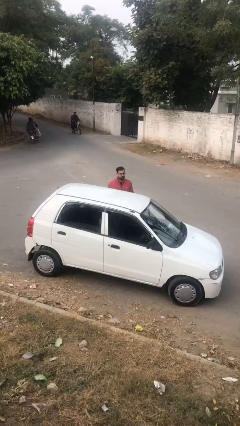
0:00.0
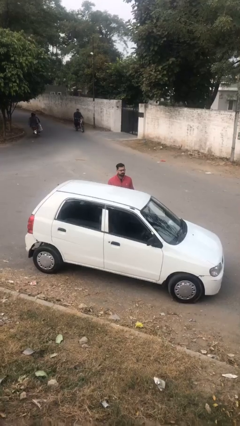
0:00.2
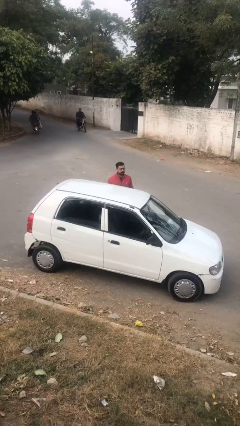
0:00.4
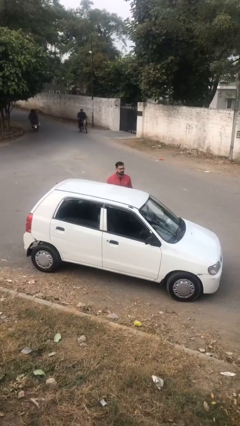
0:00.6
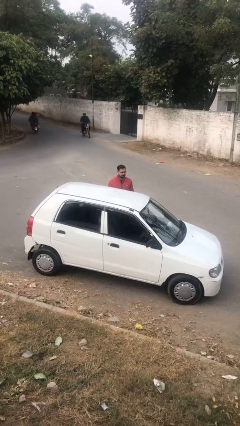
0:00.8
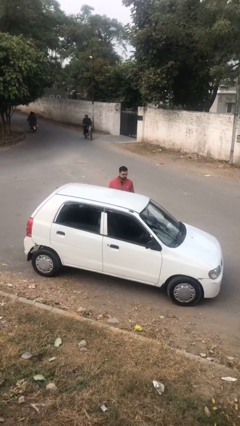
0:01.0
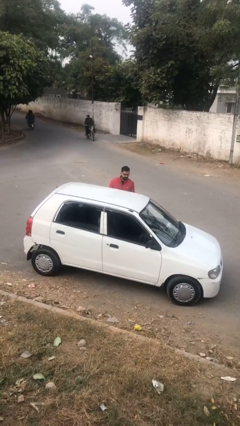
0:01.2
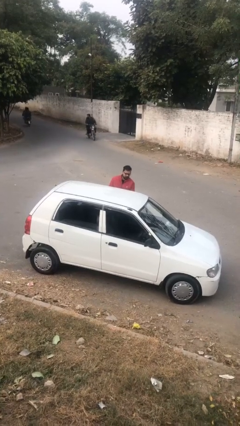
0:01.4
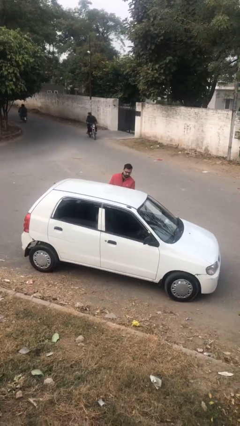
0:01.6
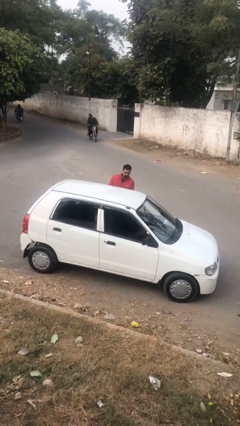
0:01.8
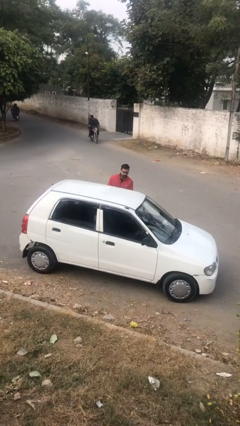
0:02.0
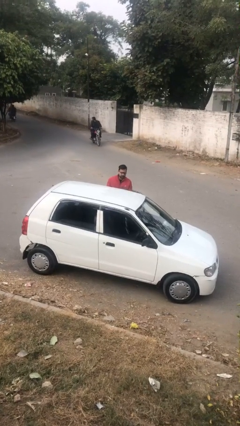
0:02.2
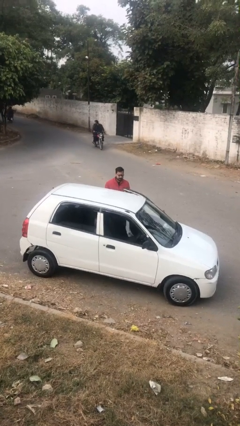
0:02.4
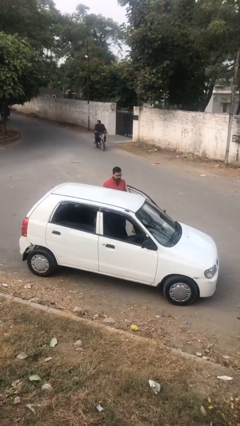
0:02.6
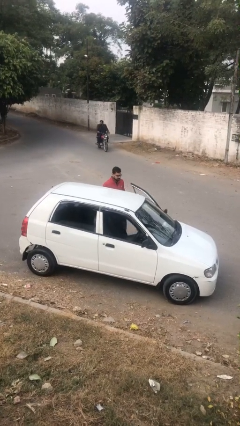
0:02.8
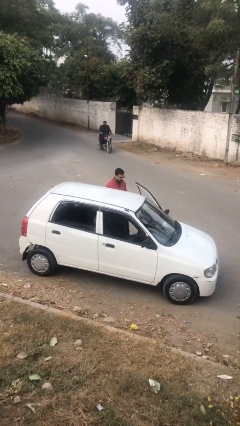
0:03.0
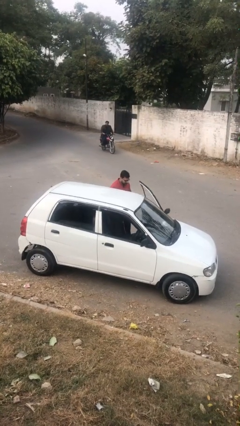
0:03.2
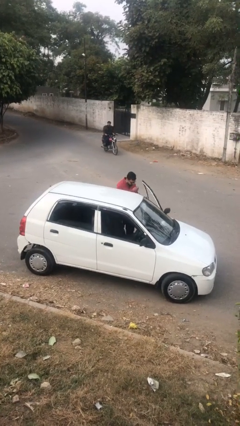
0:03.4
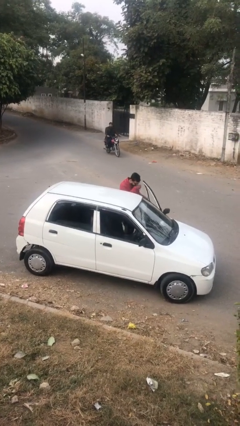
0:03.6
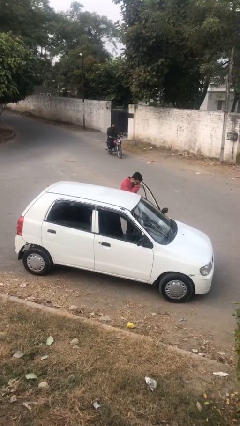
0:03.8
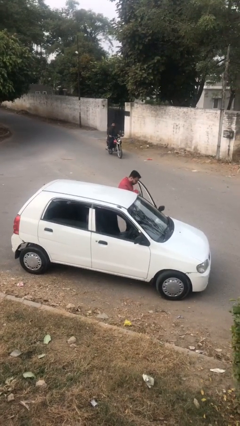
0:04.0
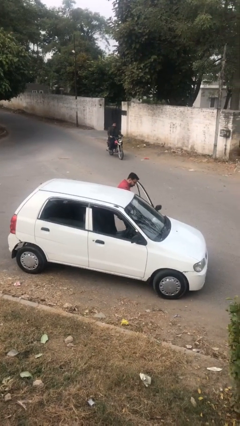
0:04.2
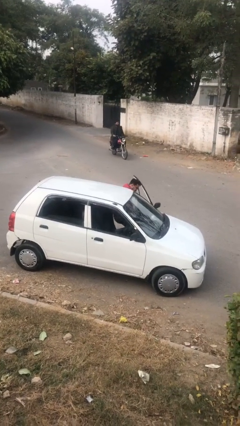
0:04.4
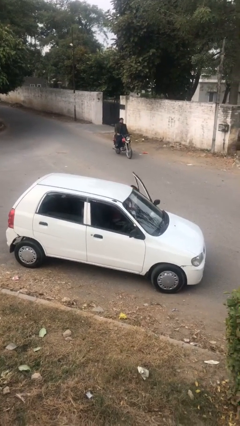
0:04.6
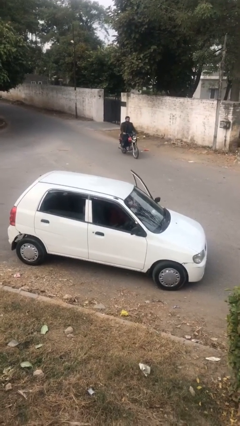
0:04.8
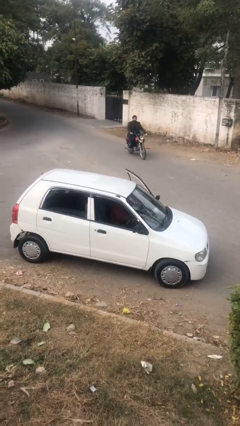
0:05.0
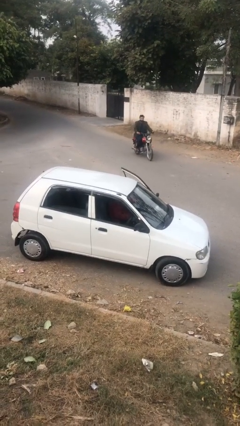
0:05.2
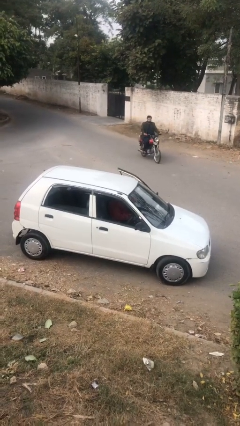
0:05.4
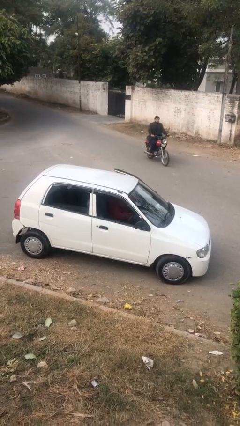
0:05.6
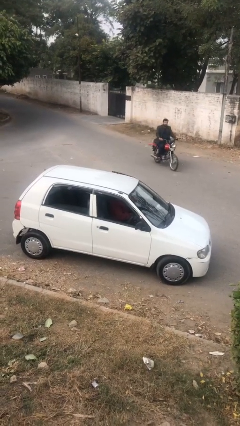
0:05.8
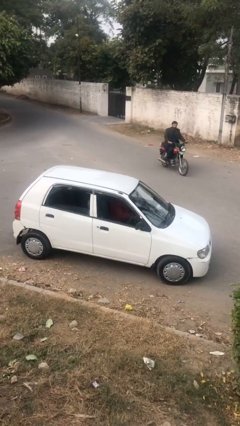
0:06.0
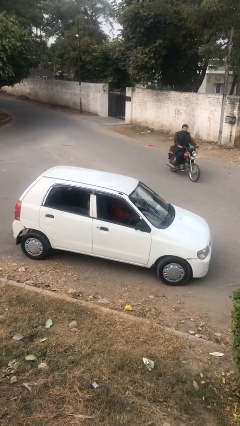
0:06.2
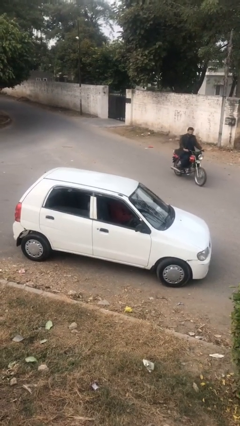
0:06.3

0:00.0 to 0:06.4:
person enters car

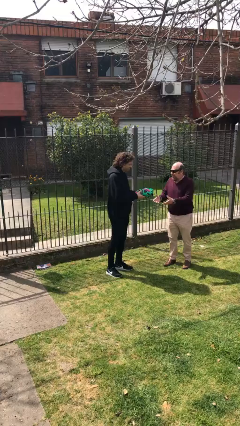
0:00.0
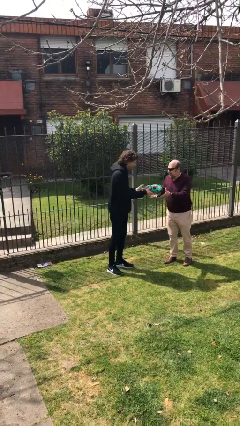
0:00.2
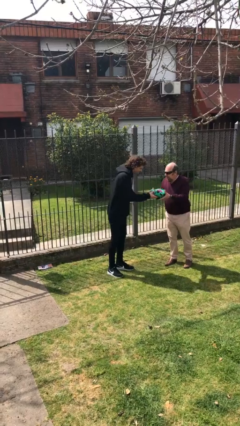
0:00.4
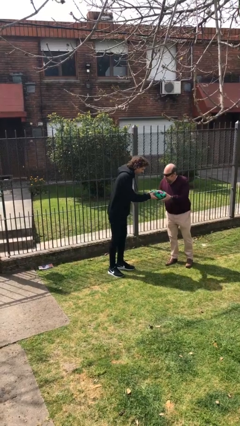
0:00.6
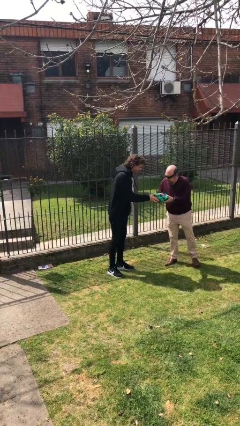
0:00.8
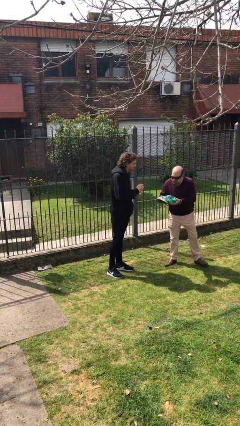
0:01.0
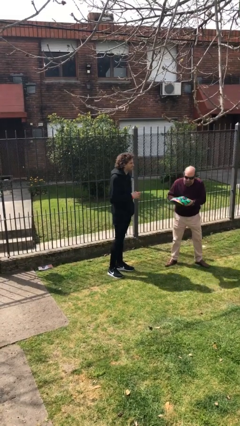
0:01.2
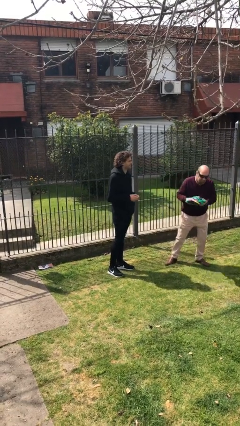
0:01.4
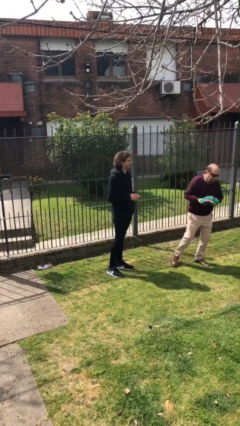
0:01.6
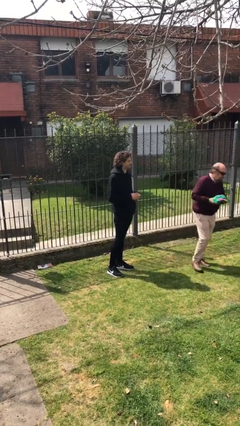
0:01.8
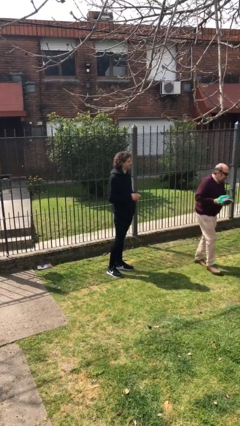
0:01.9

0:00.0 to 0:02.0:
person transfers object to person

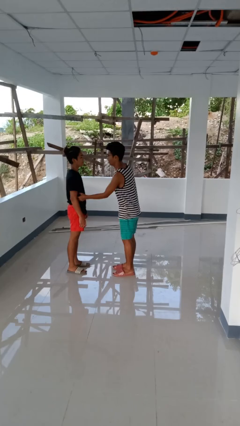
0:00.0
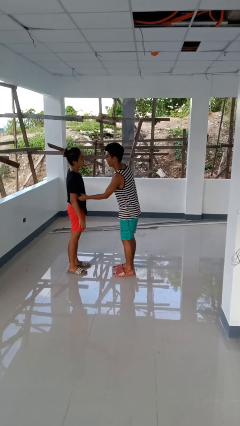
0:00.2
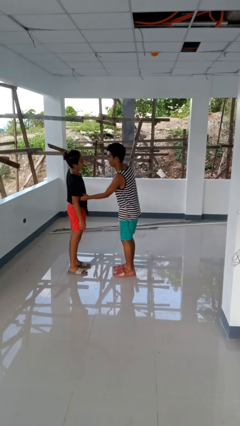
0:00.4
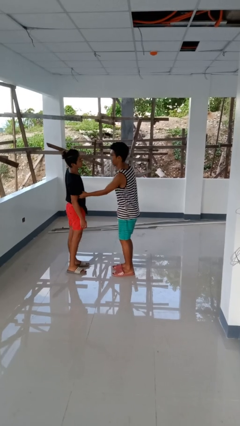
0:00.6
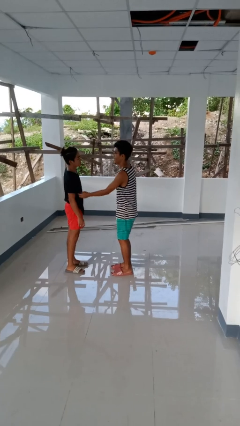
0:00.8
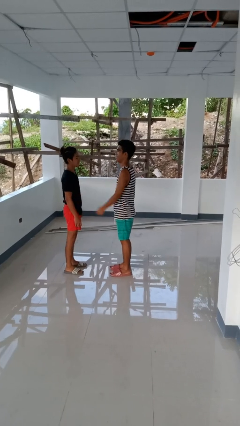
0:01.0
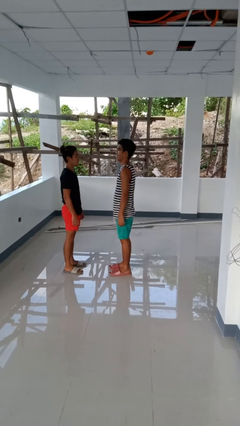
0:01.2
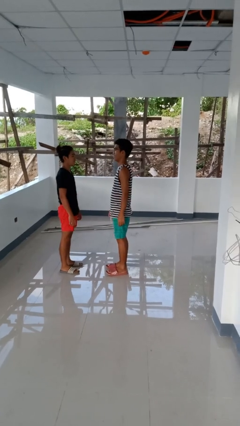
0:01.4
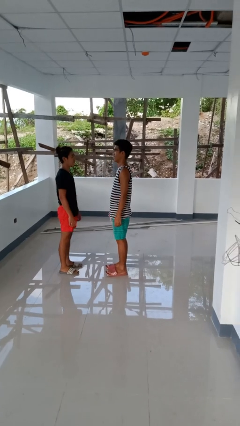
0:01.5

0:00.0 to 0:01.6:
person tickles person

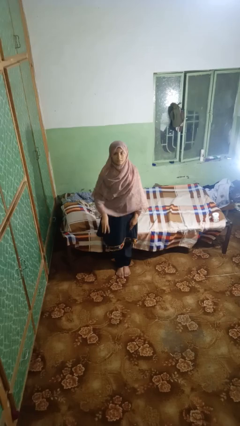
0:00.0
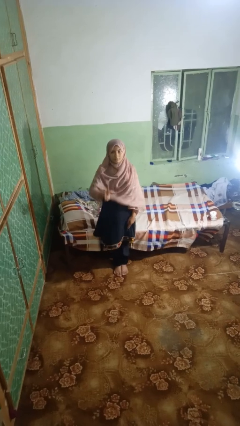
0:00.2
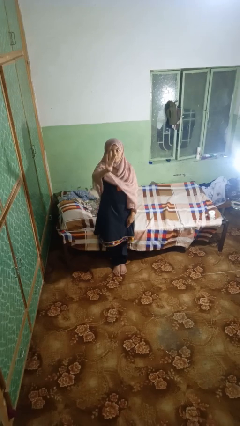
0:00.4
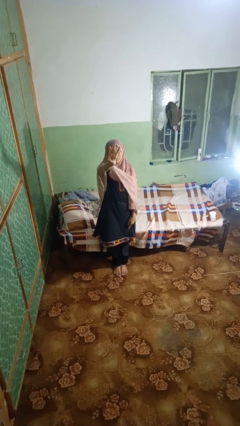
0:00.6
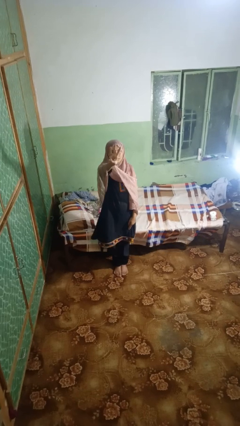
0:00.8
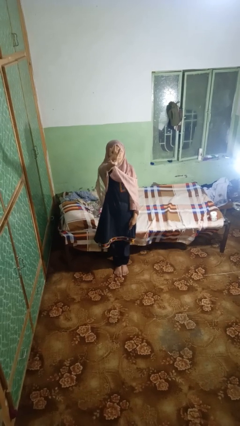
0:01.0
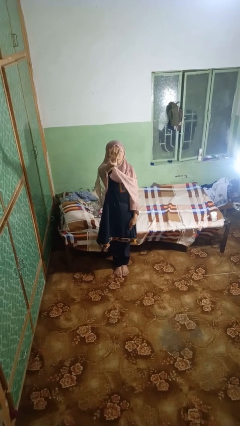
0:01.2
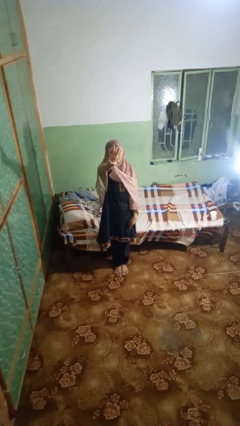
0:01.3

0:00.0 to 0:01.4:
person gestures number three

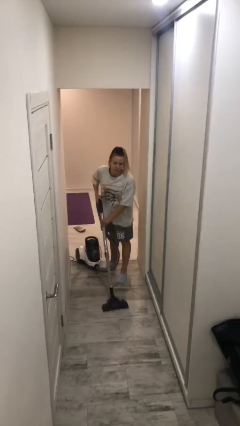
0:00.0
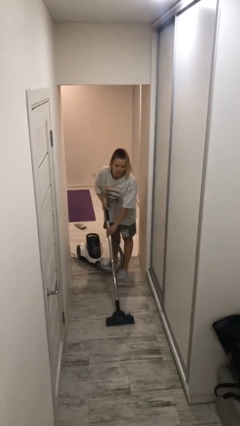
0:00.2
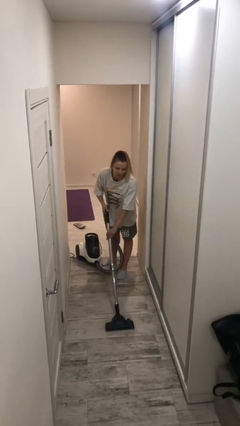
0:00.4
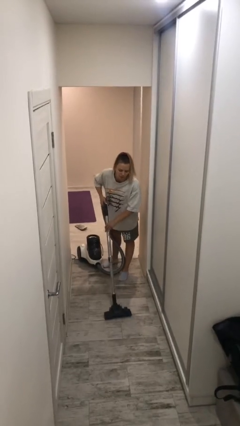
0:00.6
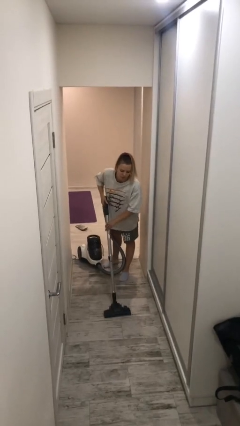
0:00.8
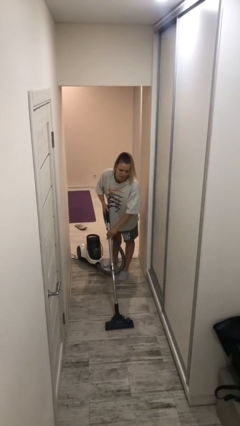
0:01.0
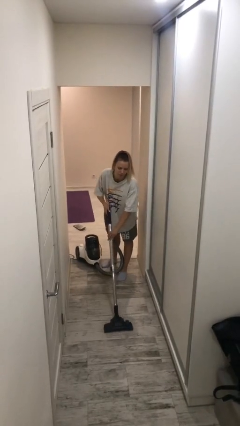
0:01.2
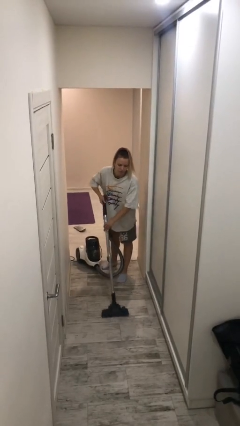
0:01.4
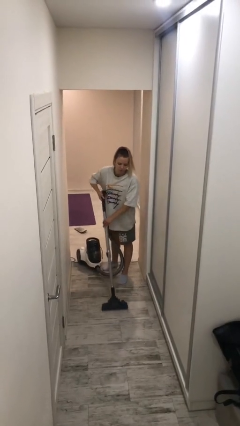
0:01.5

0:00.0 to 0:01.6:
person vacuums carpet

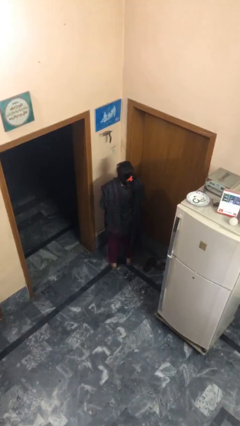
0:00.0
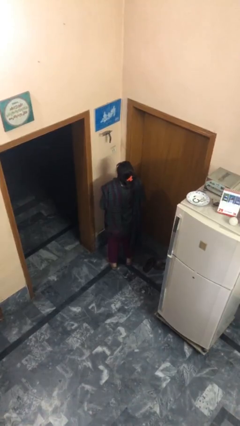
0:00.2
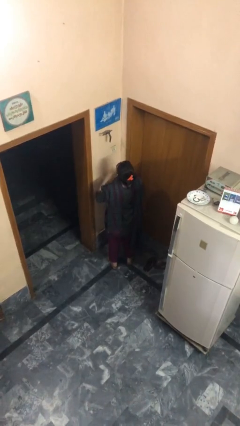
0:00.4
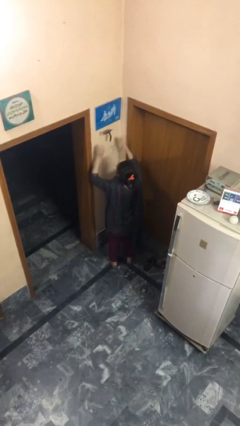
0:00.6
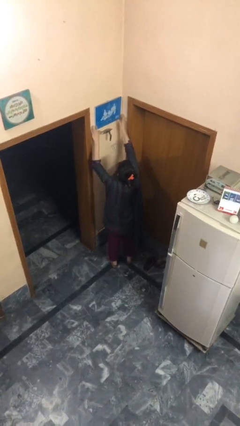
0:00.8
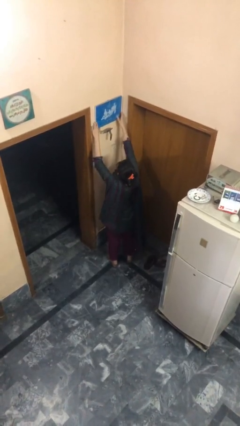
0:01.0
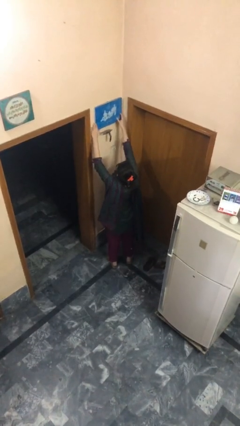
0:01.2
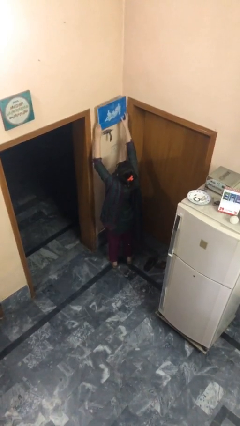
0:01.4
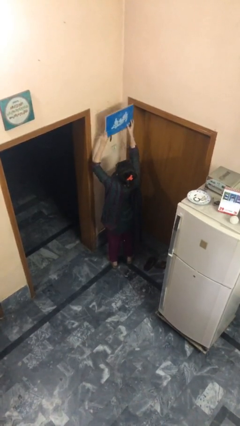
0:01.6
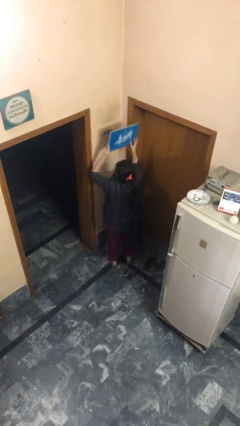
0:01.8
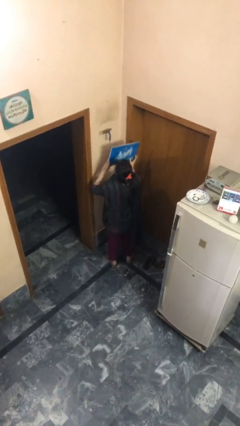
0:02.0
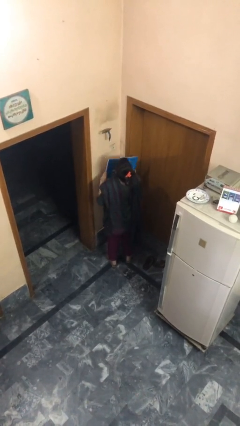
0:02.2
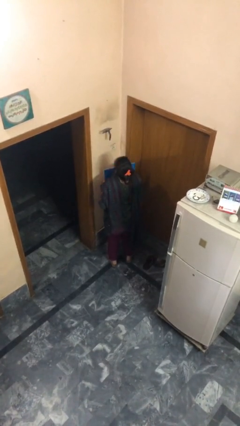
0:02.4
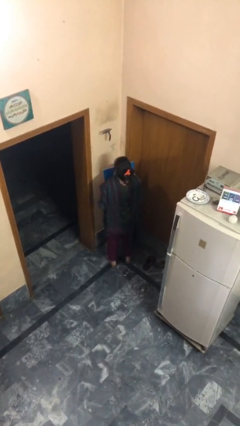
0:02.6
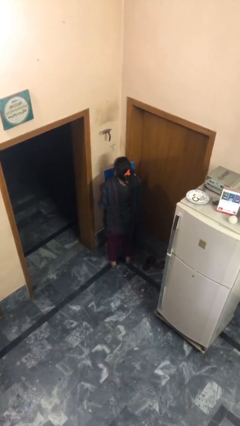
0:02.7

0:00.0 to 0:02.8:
person takes down picture frame

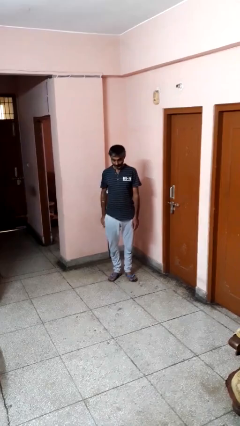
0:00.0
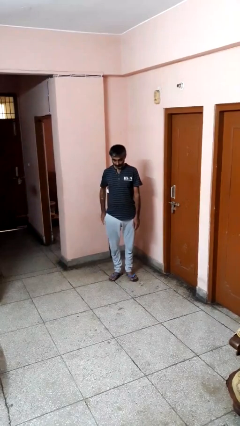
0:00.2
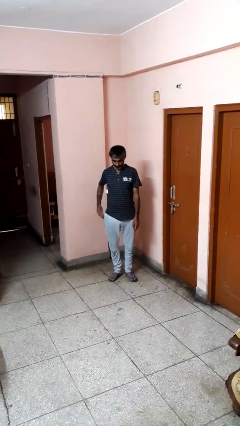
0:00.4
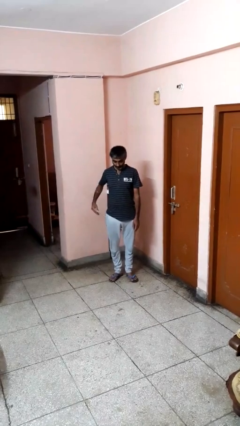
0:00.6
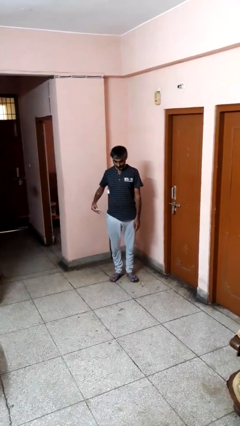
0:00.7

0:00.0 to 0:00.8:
person takes phone from pocket

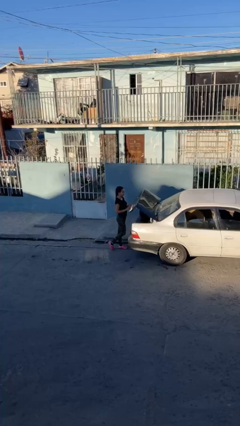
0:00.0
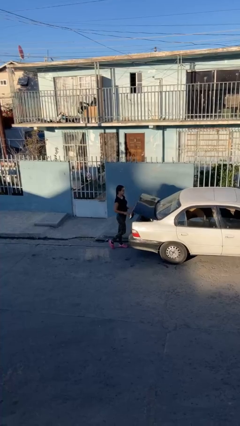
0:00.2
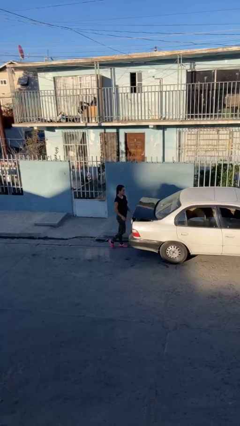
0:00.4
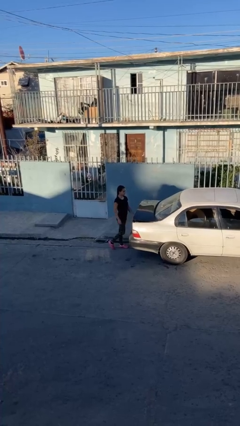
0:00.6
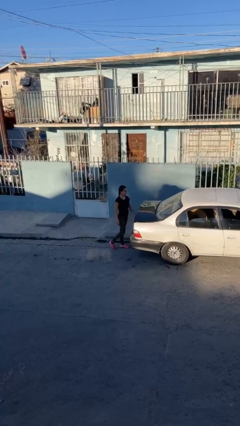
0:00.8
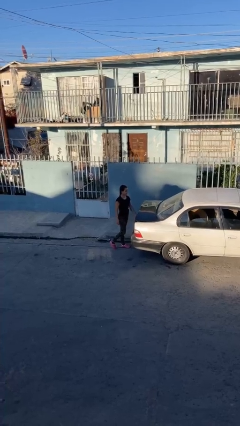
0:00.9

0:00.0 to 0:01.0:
person closes car trunk
